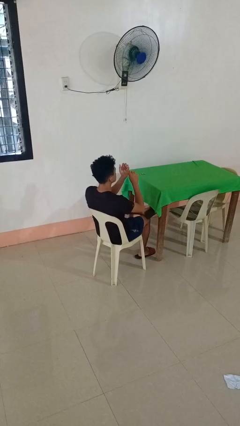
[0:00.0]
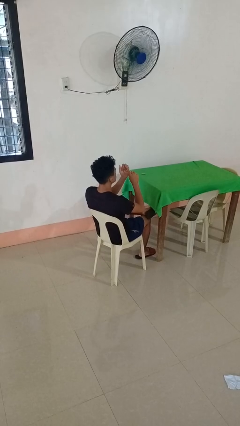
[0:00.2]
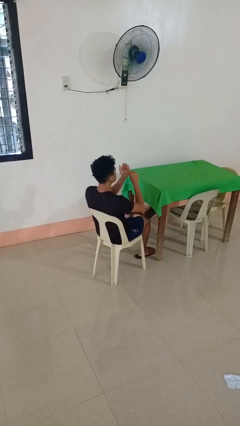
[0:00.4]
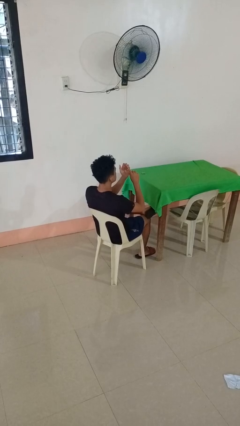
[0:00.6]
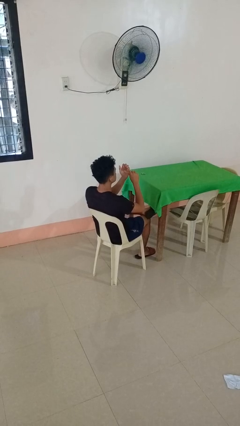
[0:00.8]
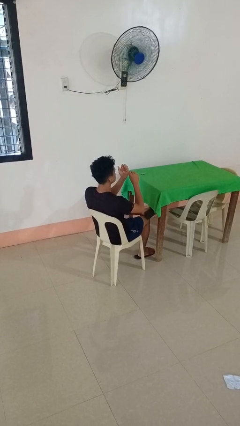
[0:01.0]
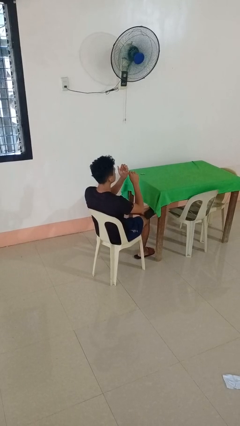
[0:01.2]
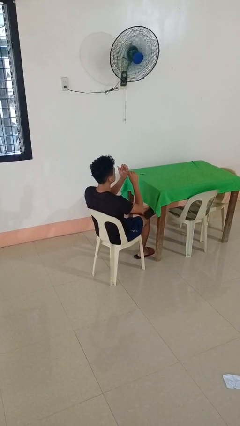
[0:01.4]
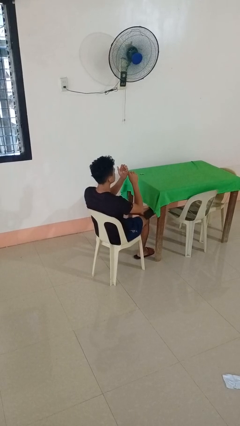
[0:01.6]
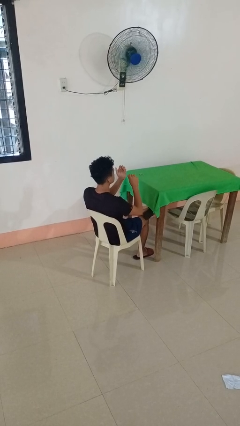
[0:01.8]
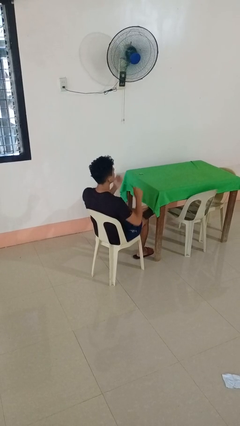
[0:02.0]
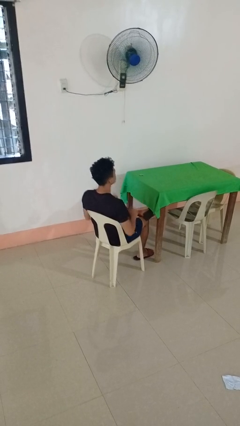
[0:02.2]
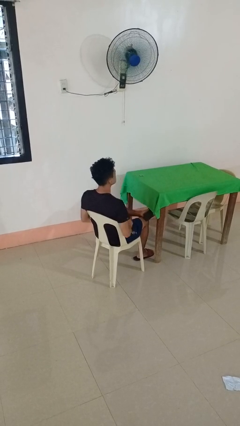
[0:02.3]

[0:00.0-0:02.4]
person files fingernails

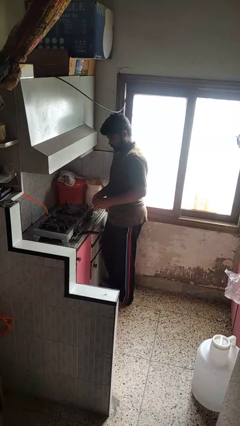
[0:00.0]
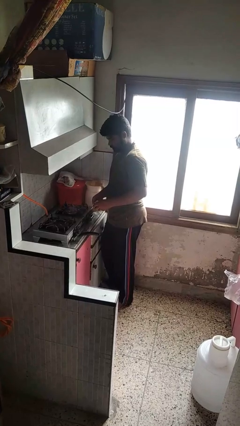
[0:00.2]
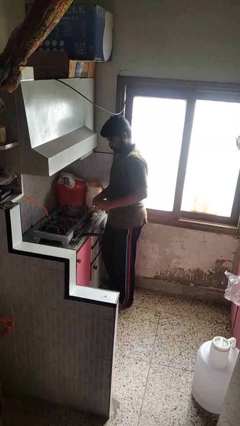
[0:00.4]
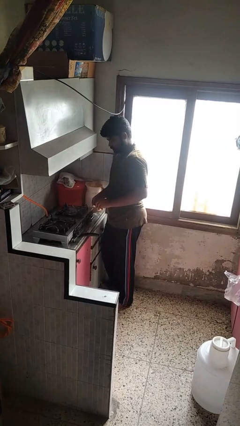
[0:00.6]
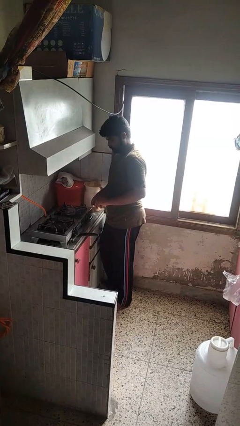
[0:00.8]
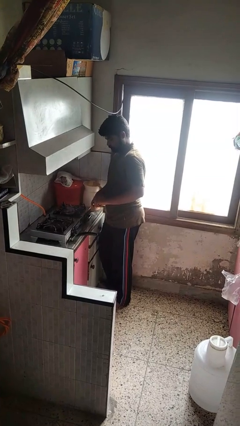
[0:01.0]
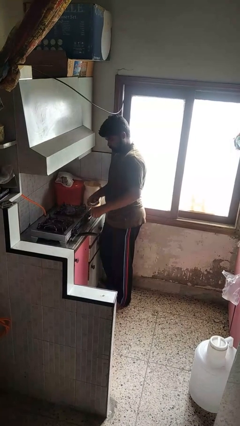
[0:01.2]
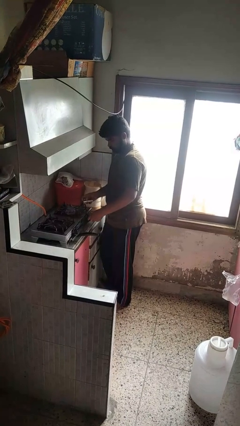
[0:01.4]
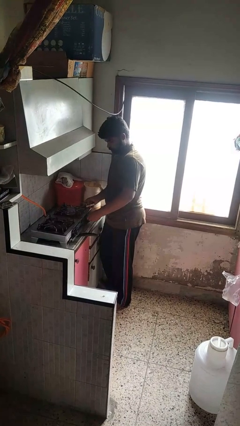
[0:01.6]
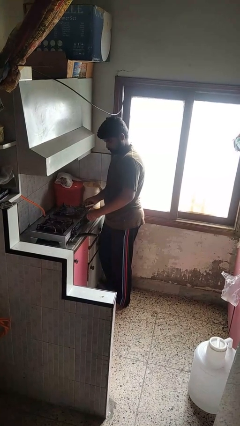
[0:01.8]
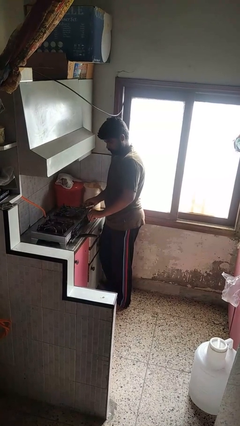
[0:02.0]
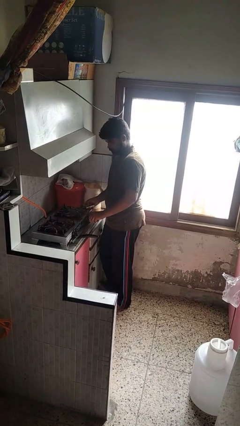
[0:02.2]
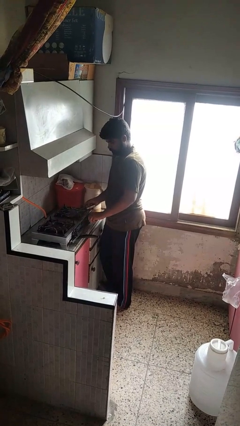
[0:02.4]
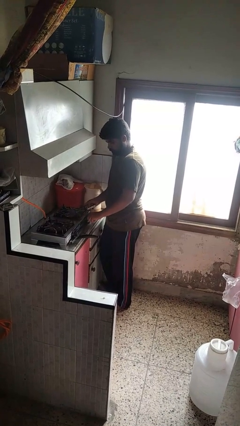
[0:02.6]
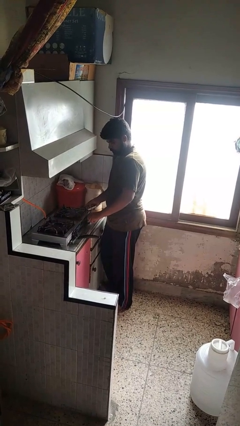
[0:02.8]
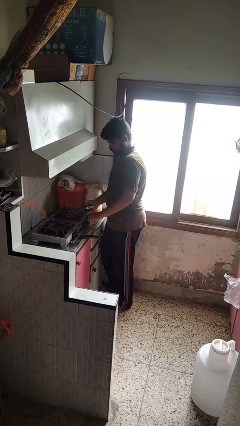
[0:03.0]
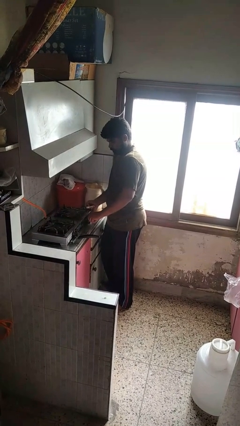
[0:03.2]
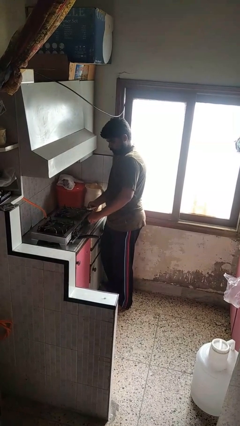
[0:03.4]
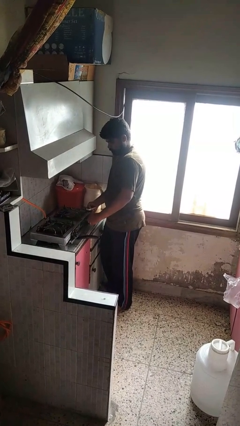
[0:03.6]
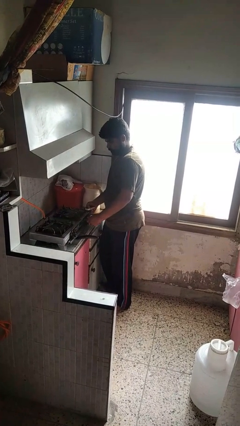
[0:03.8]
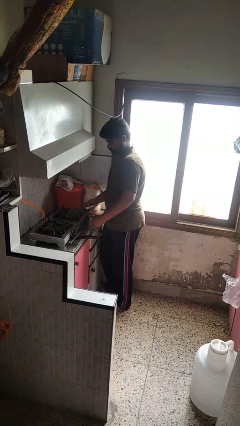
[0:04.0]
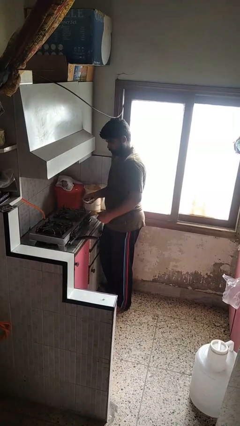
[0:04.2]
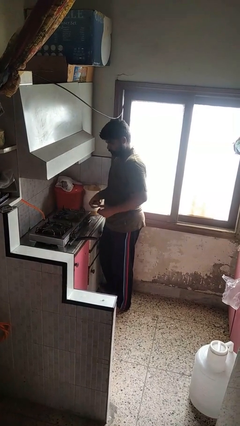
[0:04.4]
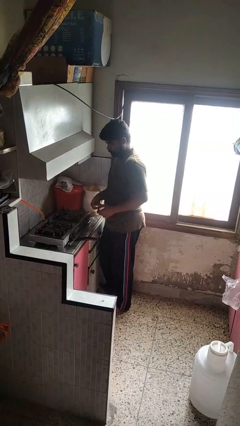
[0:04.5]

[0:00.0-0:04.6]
person turns off stovetop

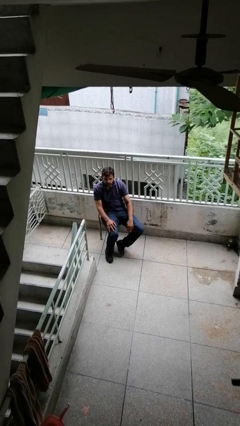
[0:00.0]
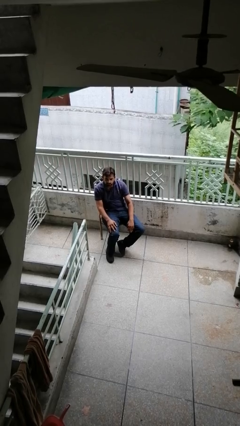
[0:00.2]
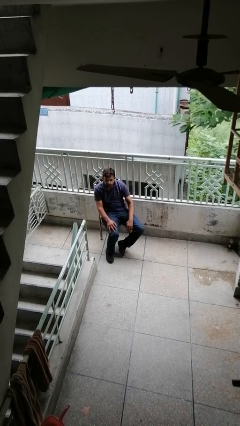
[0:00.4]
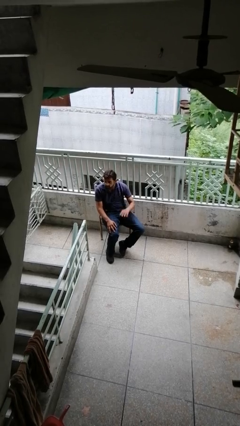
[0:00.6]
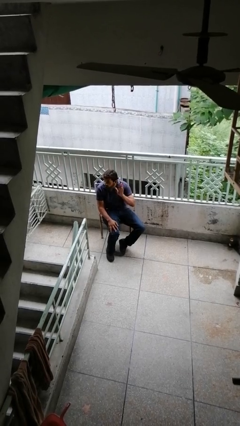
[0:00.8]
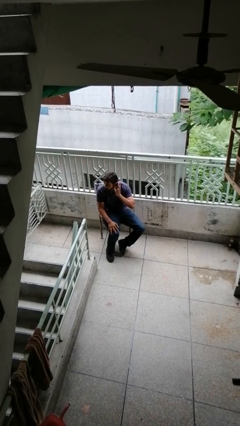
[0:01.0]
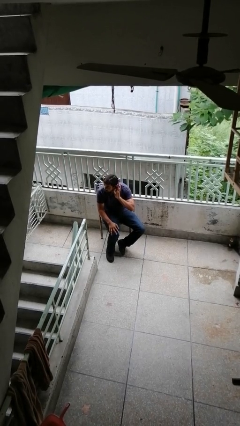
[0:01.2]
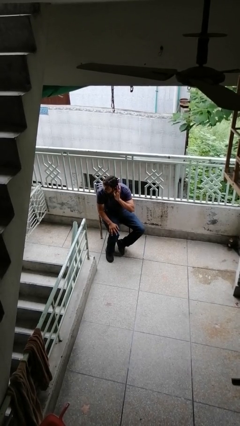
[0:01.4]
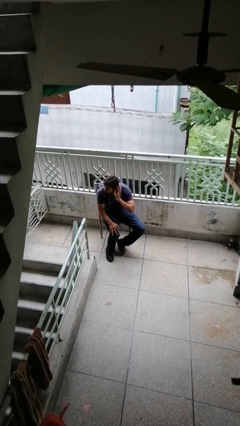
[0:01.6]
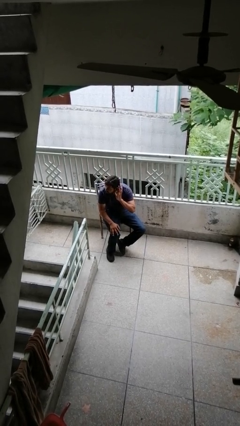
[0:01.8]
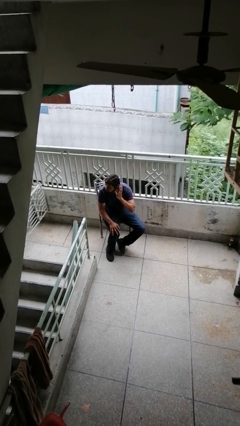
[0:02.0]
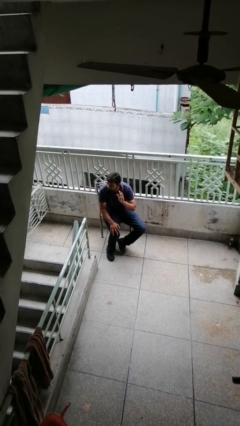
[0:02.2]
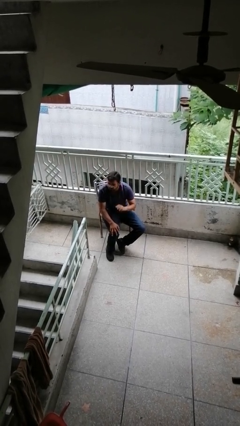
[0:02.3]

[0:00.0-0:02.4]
person gestures listen closely

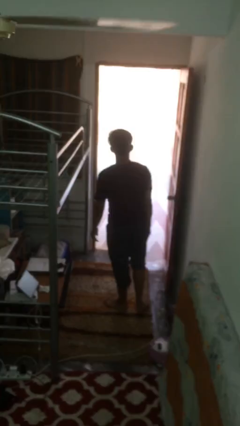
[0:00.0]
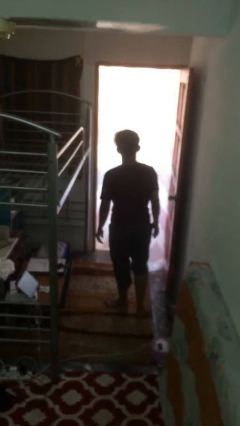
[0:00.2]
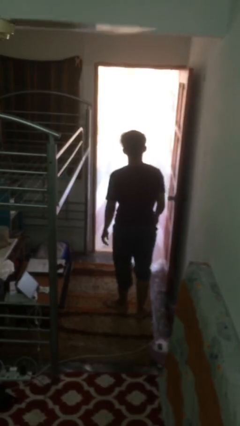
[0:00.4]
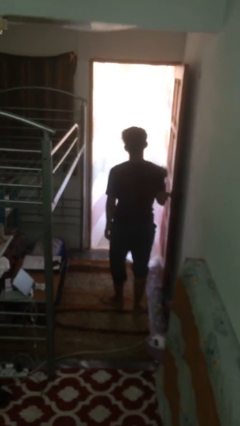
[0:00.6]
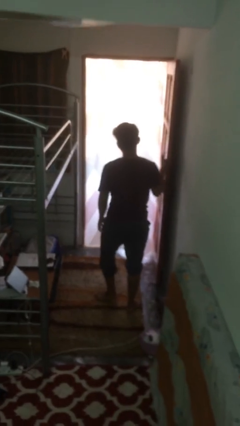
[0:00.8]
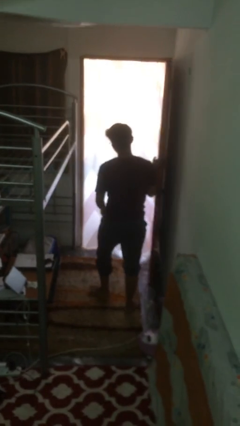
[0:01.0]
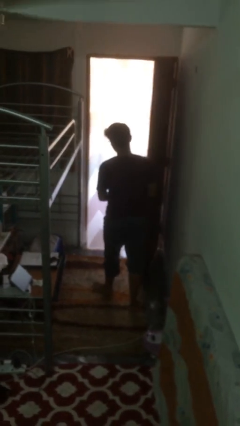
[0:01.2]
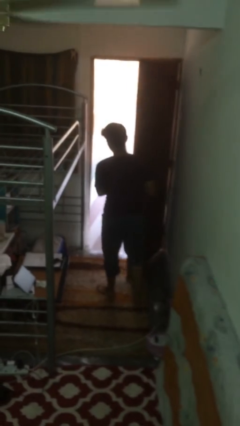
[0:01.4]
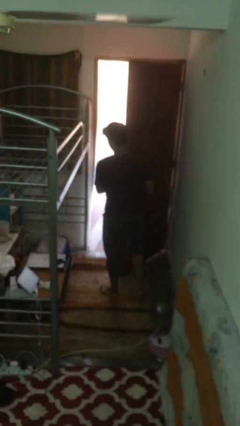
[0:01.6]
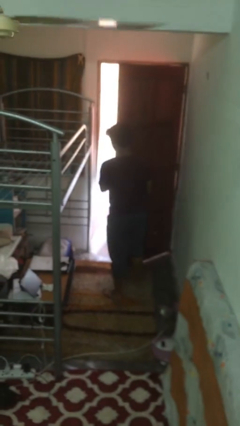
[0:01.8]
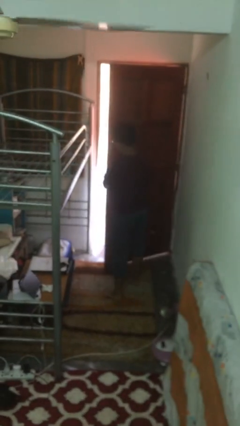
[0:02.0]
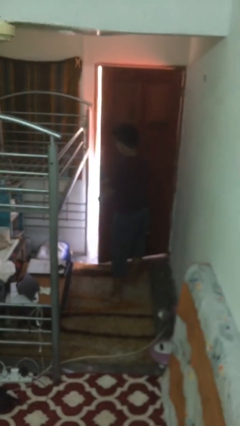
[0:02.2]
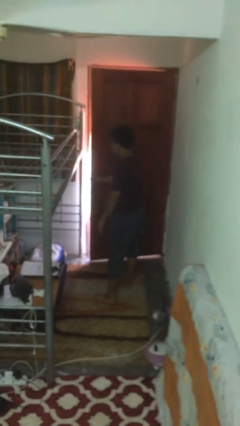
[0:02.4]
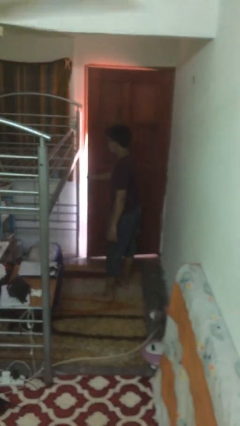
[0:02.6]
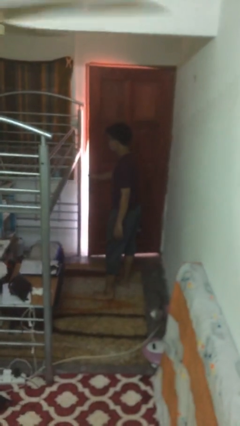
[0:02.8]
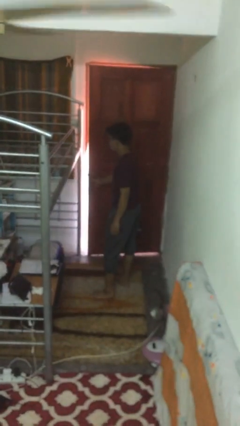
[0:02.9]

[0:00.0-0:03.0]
person closes facility door

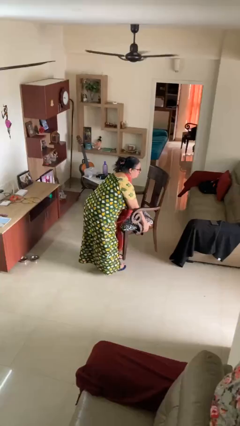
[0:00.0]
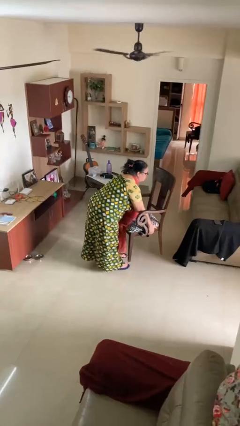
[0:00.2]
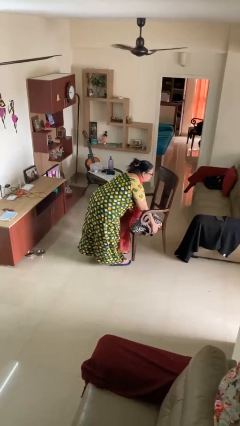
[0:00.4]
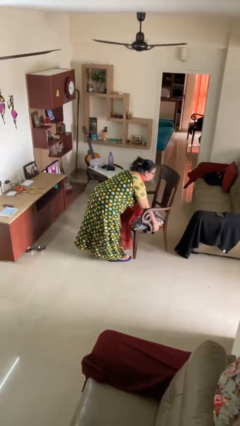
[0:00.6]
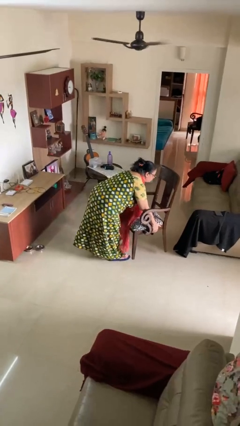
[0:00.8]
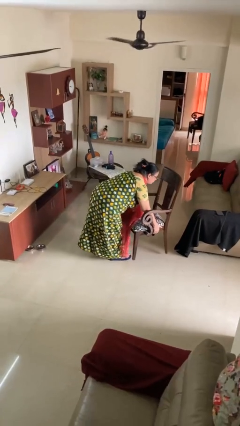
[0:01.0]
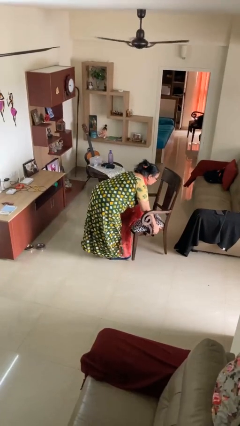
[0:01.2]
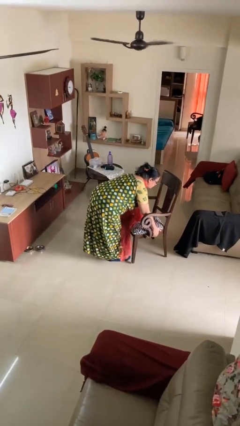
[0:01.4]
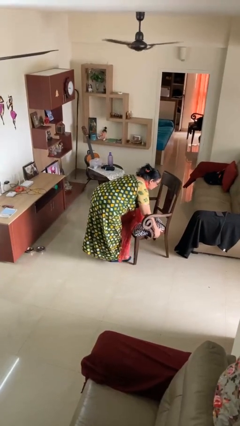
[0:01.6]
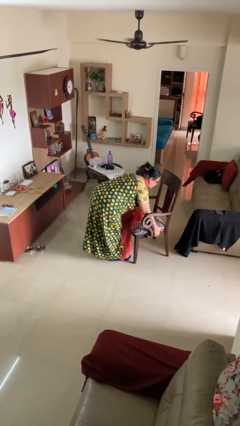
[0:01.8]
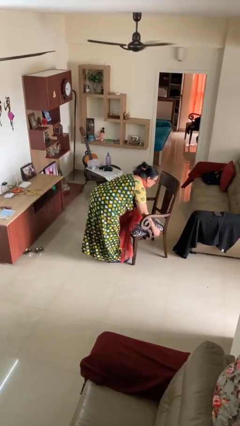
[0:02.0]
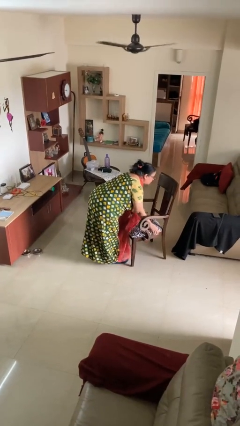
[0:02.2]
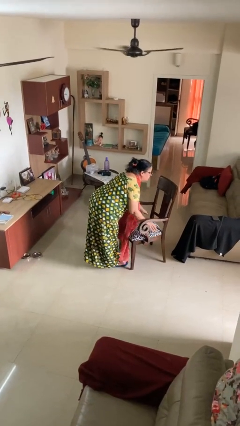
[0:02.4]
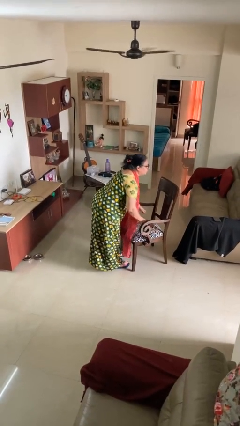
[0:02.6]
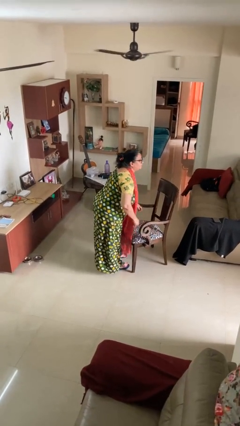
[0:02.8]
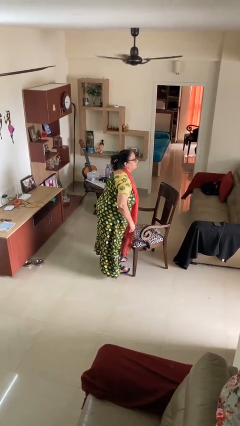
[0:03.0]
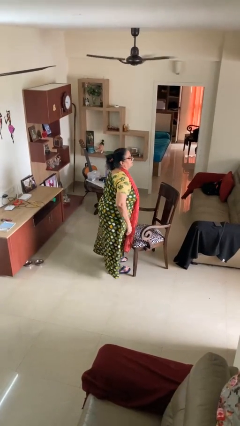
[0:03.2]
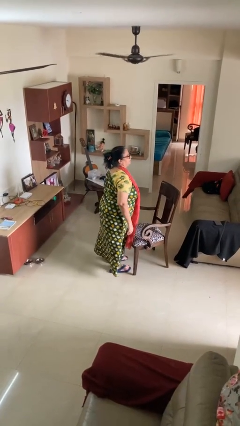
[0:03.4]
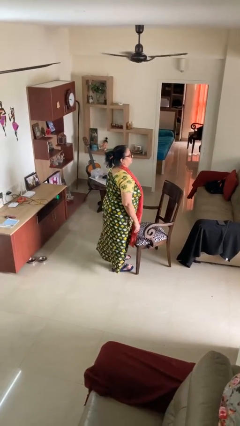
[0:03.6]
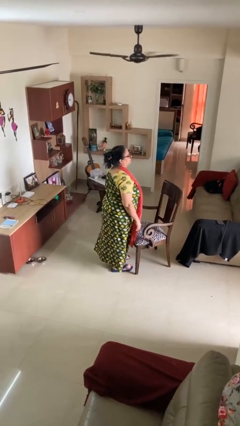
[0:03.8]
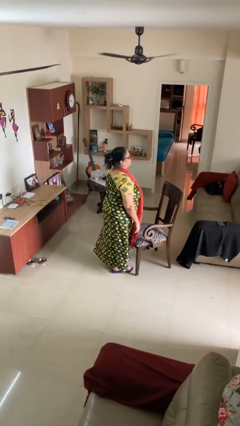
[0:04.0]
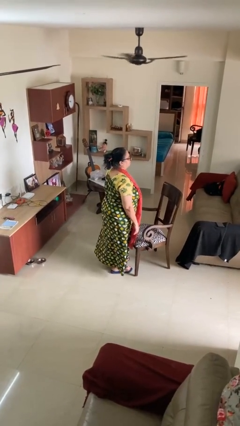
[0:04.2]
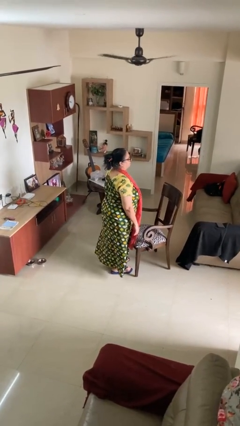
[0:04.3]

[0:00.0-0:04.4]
person puts down object on floor

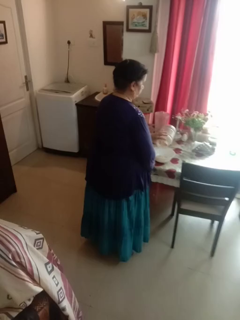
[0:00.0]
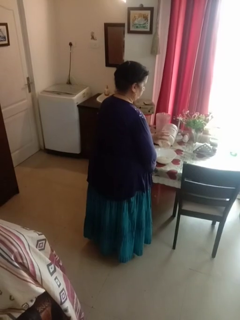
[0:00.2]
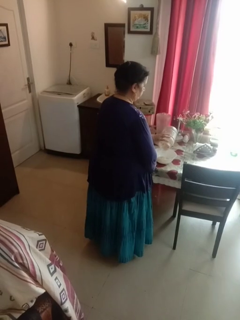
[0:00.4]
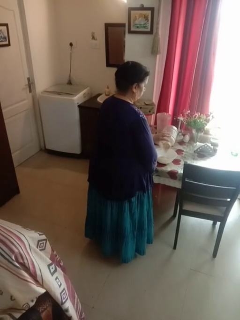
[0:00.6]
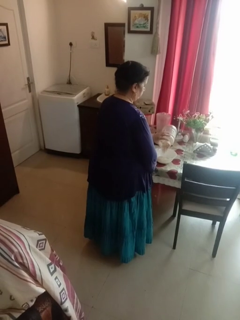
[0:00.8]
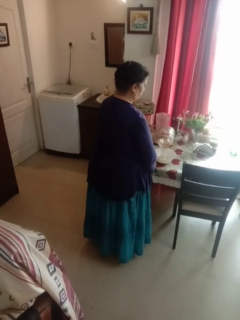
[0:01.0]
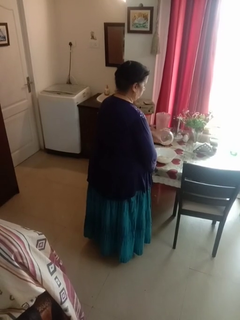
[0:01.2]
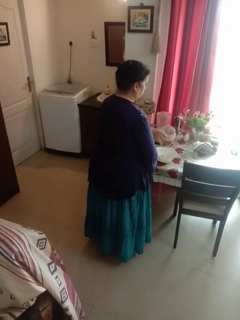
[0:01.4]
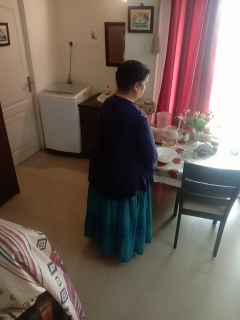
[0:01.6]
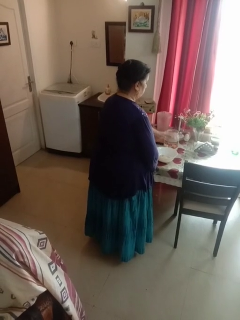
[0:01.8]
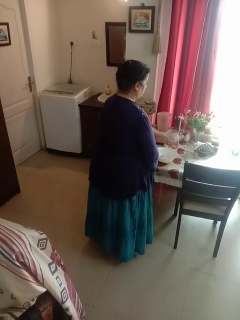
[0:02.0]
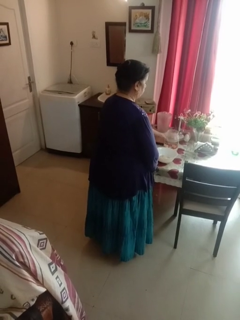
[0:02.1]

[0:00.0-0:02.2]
person pours into bowl
